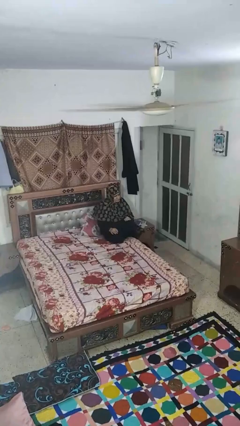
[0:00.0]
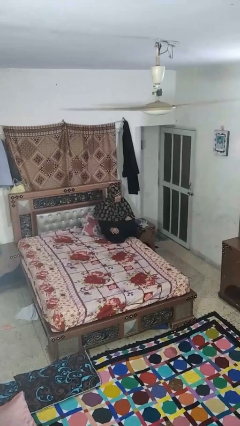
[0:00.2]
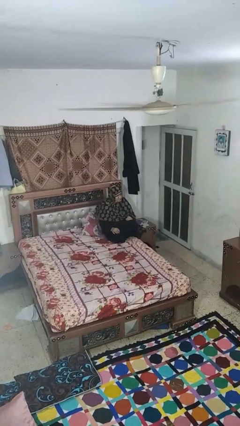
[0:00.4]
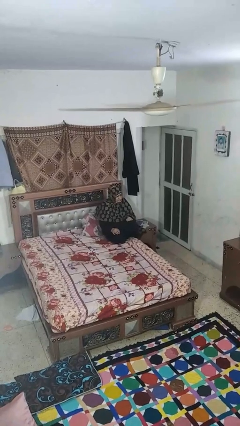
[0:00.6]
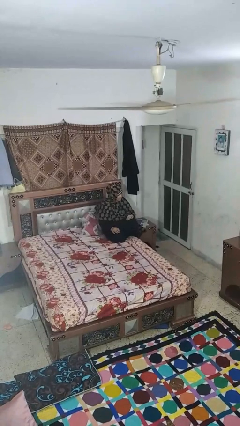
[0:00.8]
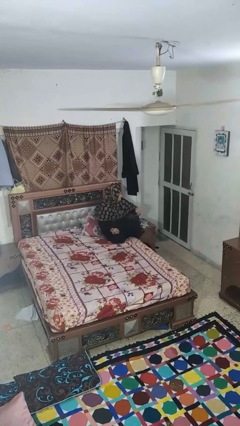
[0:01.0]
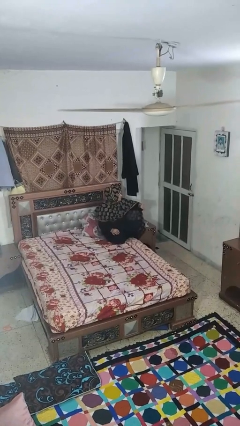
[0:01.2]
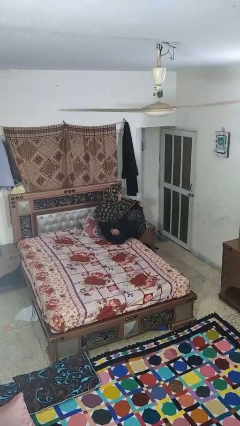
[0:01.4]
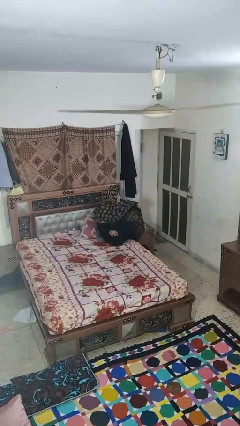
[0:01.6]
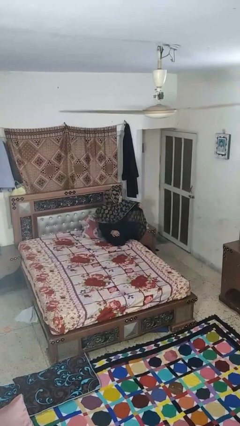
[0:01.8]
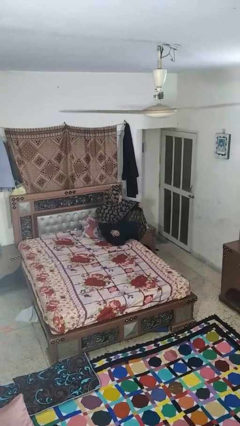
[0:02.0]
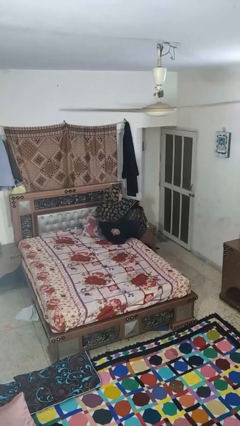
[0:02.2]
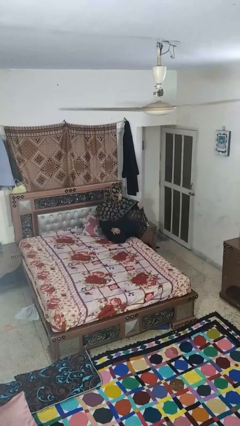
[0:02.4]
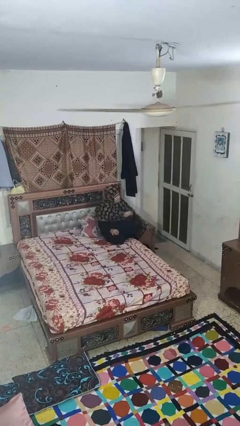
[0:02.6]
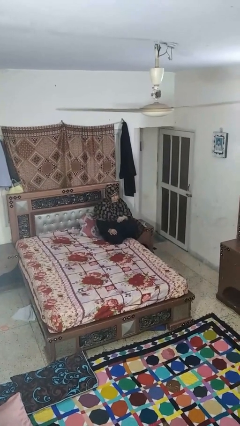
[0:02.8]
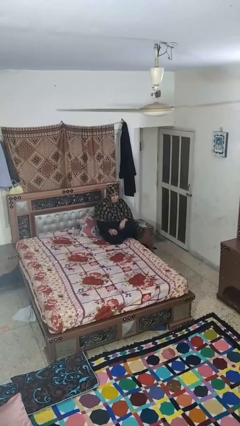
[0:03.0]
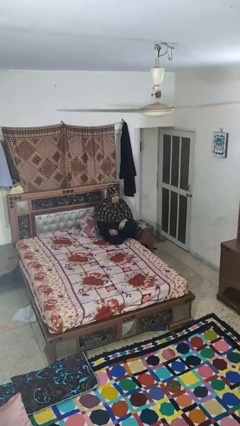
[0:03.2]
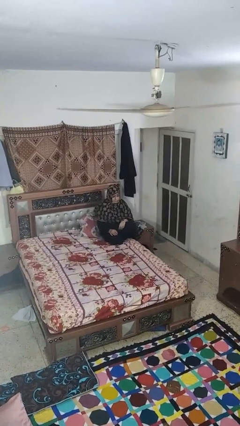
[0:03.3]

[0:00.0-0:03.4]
person looks at wristwatch

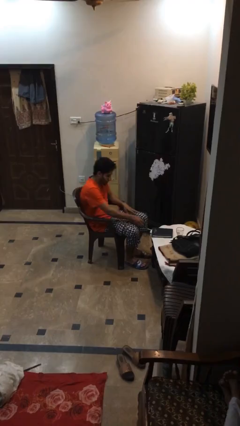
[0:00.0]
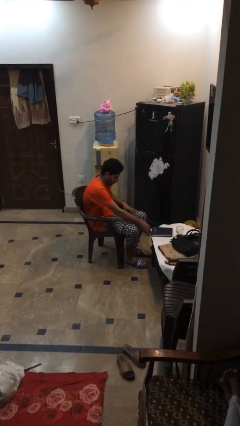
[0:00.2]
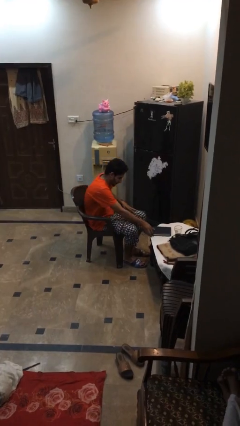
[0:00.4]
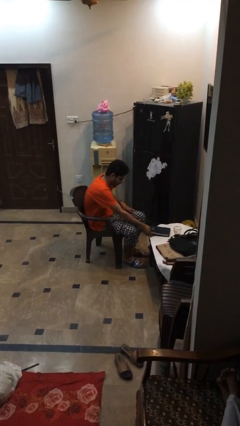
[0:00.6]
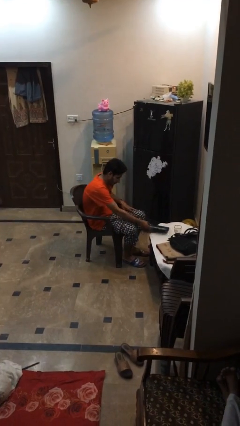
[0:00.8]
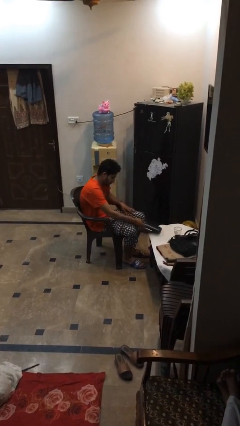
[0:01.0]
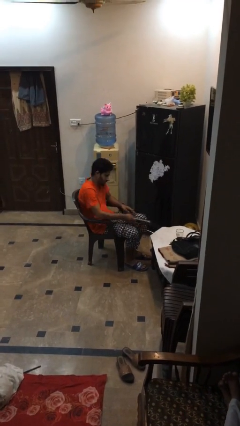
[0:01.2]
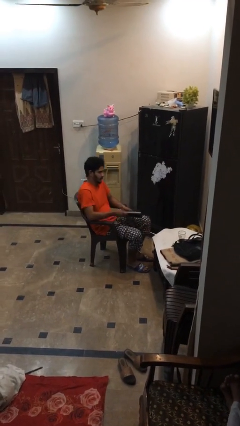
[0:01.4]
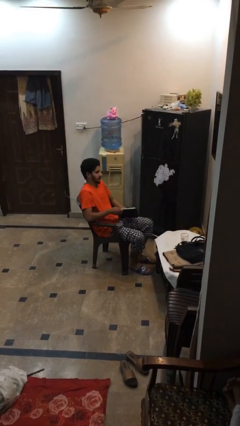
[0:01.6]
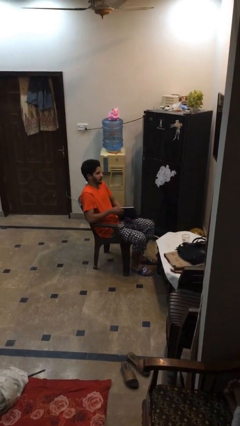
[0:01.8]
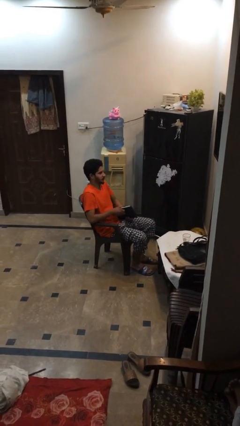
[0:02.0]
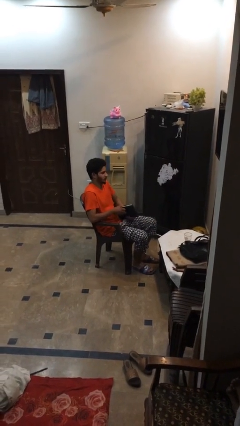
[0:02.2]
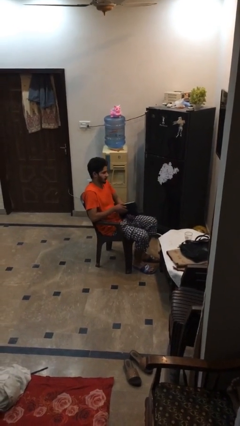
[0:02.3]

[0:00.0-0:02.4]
person picks up object from table

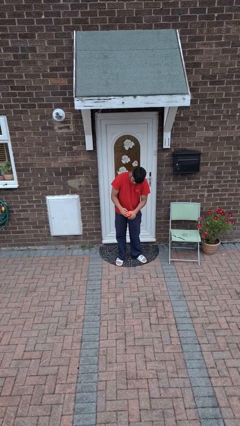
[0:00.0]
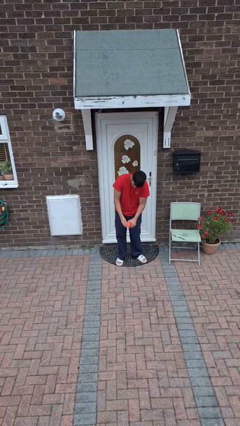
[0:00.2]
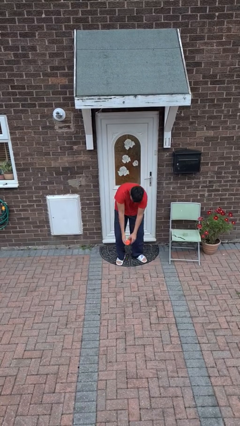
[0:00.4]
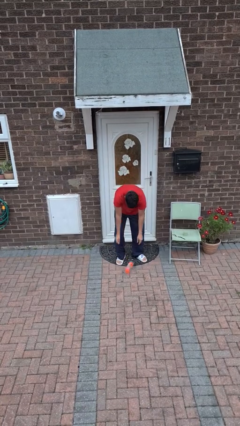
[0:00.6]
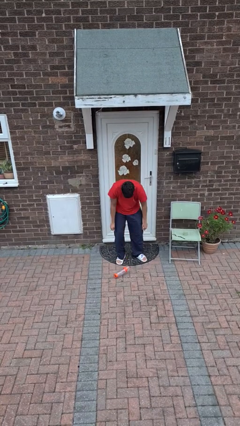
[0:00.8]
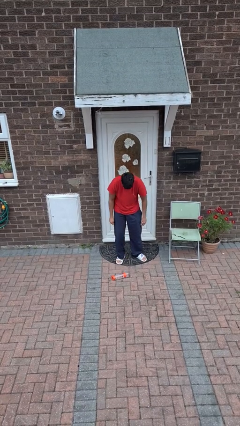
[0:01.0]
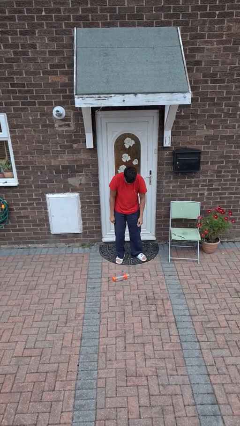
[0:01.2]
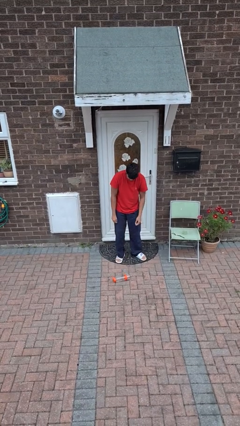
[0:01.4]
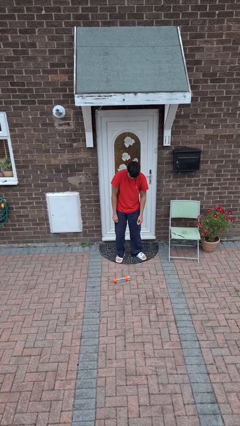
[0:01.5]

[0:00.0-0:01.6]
person drops object

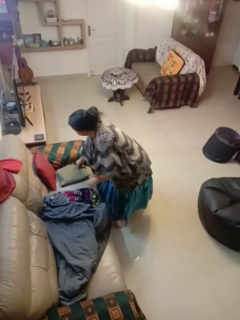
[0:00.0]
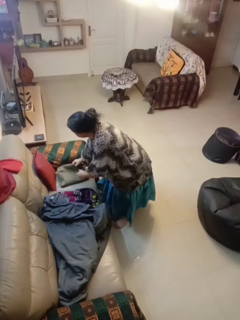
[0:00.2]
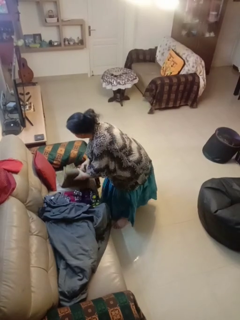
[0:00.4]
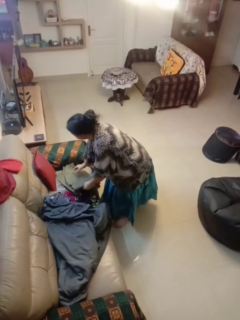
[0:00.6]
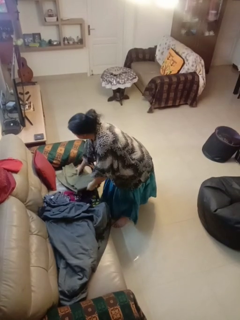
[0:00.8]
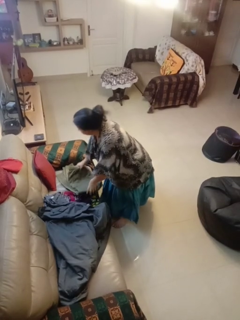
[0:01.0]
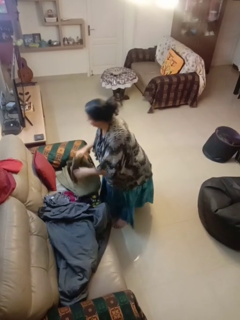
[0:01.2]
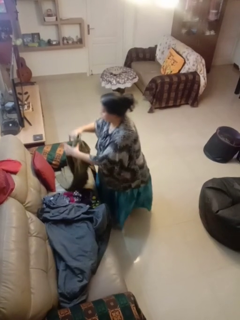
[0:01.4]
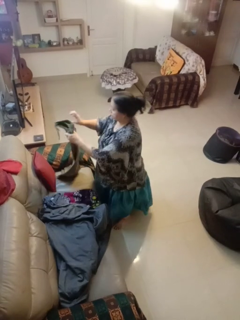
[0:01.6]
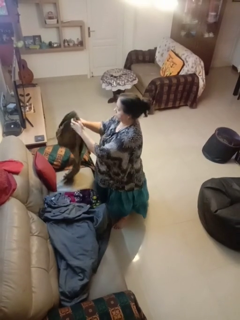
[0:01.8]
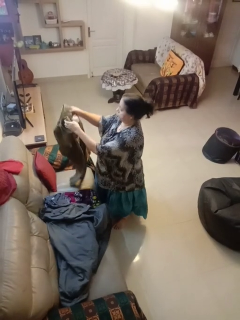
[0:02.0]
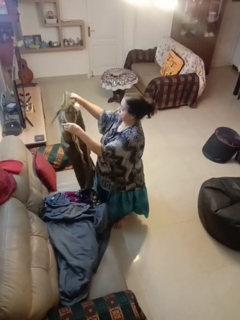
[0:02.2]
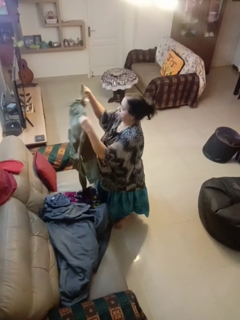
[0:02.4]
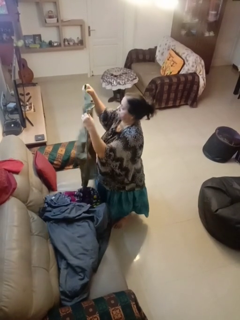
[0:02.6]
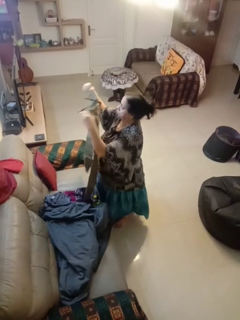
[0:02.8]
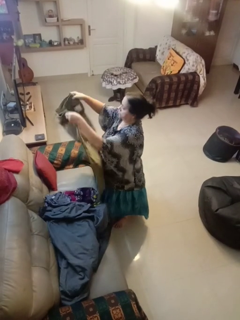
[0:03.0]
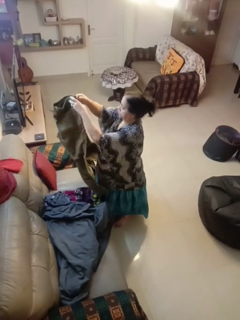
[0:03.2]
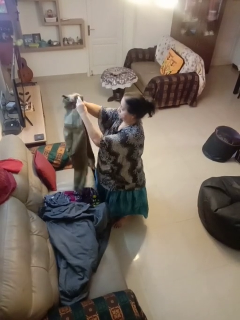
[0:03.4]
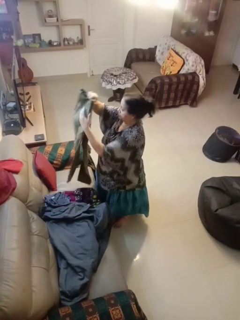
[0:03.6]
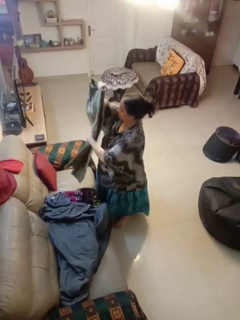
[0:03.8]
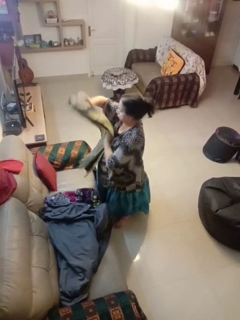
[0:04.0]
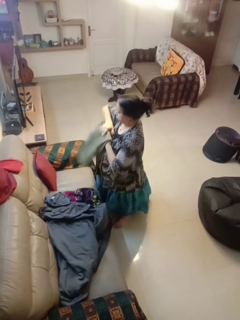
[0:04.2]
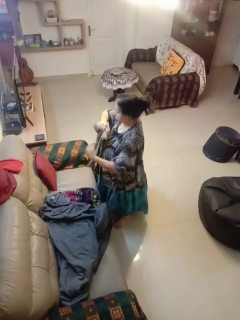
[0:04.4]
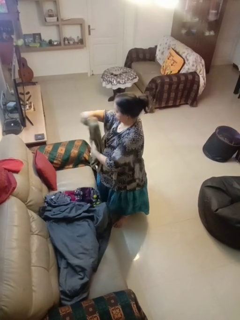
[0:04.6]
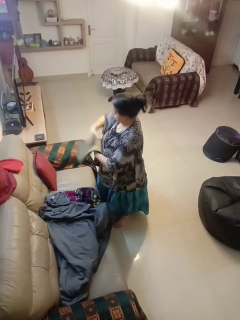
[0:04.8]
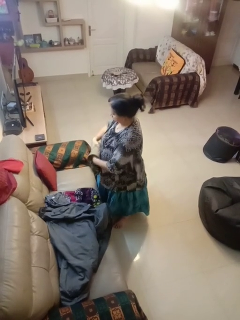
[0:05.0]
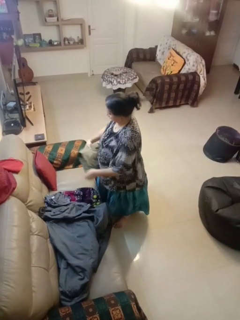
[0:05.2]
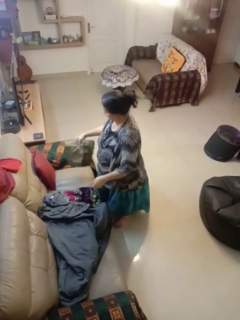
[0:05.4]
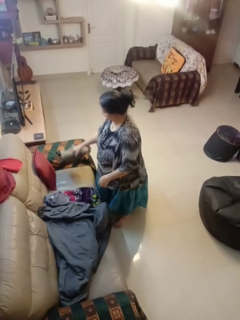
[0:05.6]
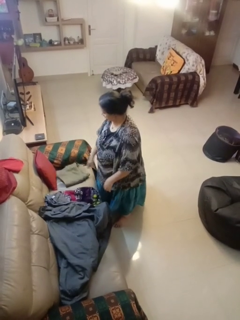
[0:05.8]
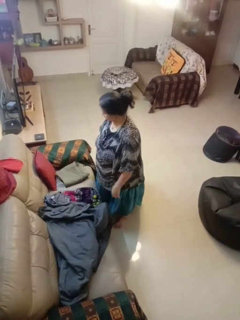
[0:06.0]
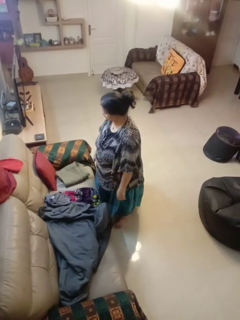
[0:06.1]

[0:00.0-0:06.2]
person folds pants

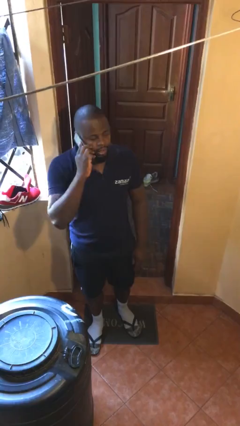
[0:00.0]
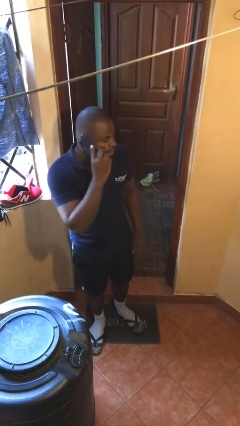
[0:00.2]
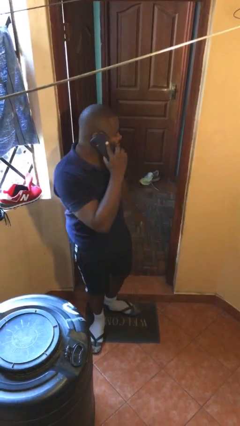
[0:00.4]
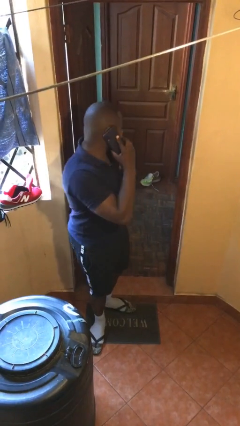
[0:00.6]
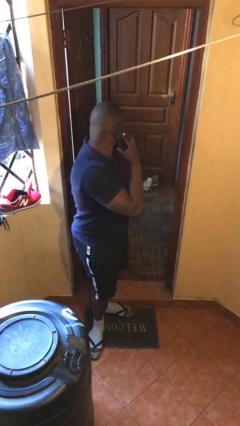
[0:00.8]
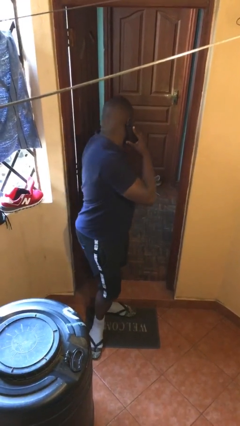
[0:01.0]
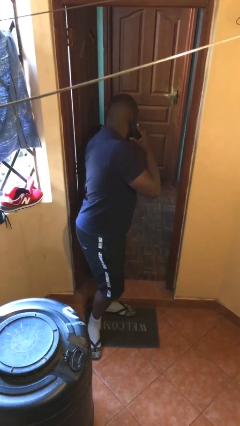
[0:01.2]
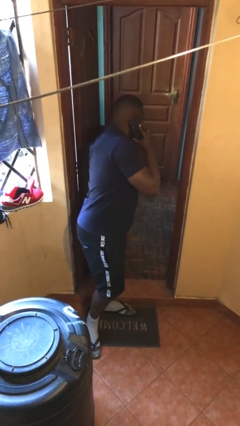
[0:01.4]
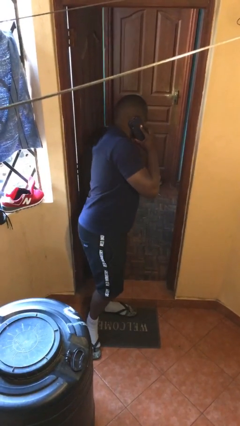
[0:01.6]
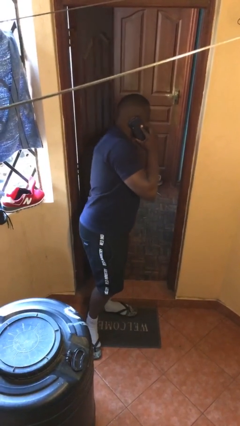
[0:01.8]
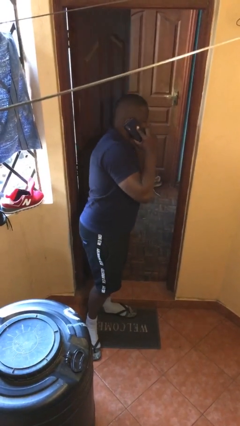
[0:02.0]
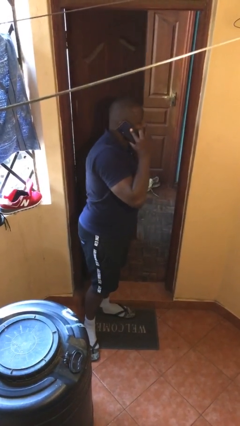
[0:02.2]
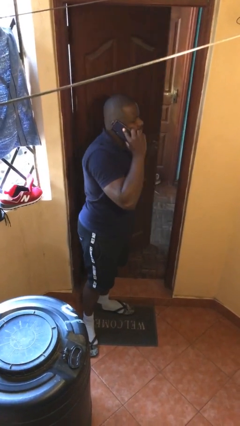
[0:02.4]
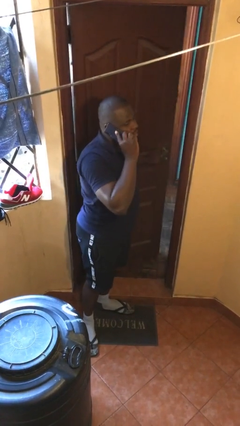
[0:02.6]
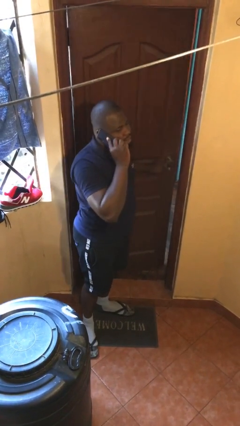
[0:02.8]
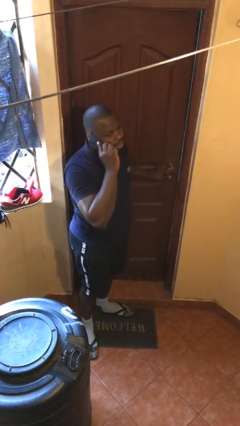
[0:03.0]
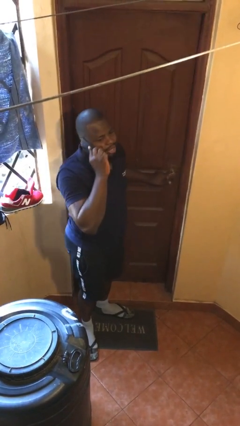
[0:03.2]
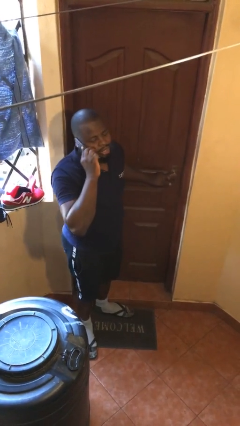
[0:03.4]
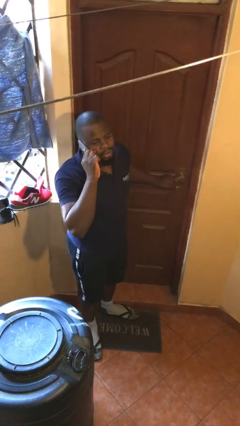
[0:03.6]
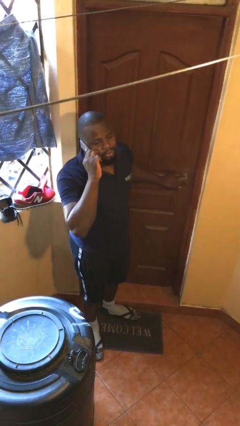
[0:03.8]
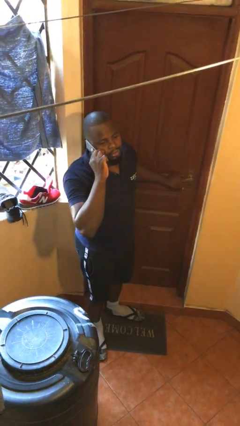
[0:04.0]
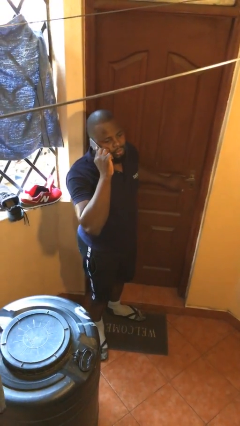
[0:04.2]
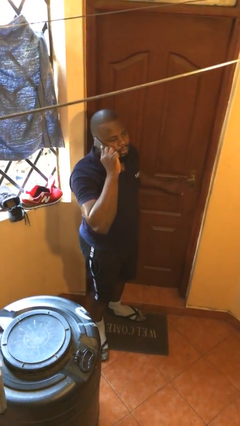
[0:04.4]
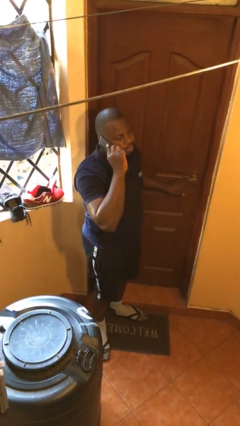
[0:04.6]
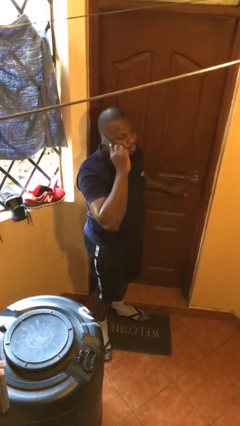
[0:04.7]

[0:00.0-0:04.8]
person closes facility door

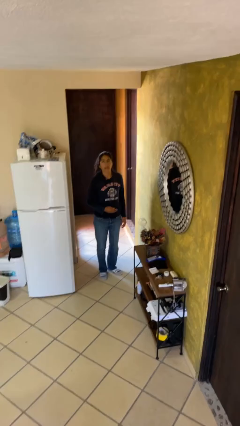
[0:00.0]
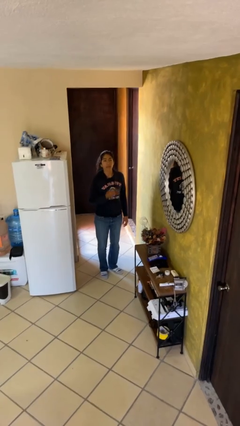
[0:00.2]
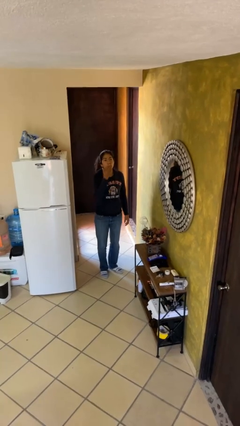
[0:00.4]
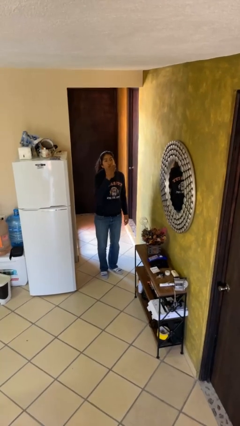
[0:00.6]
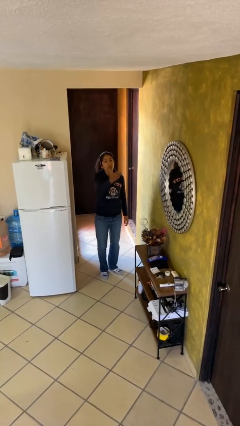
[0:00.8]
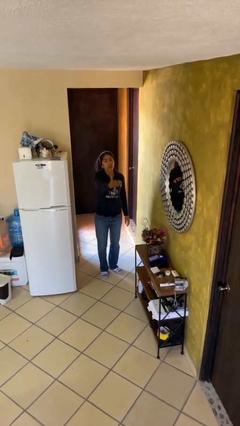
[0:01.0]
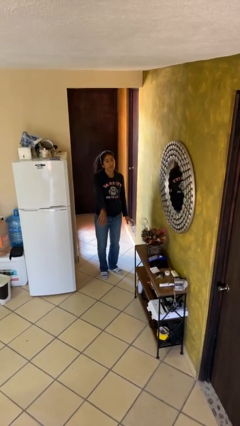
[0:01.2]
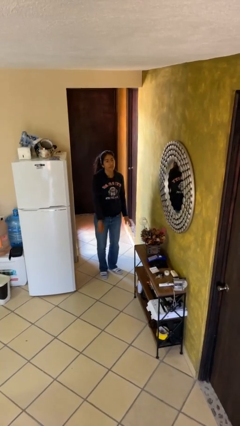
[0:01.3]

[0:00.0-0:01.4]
person gestures blow kiss
